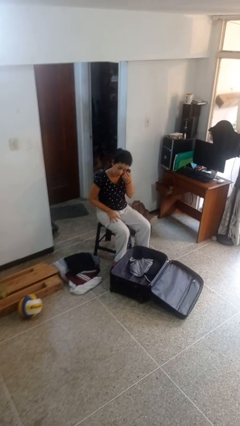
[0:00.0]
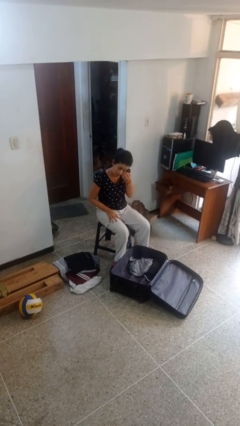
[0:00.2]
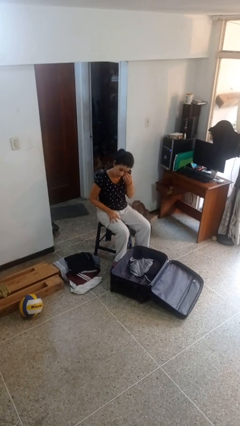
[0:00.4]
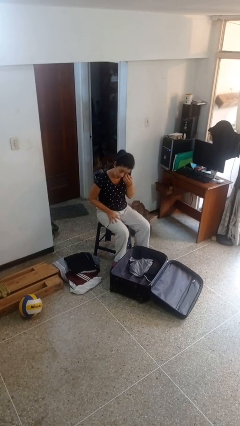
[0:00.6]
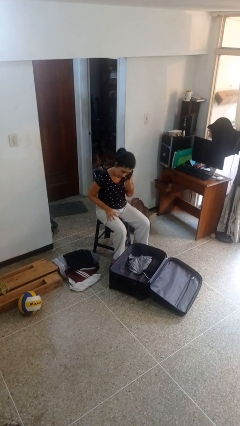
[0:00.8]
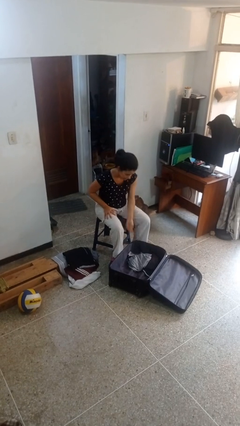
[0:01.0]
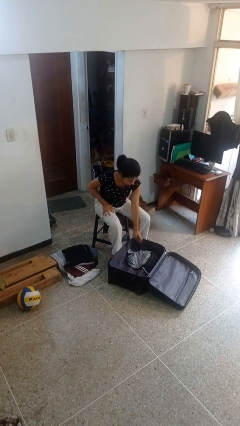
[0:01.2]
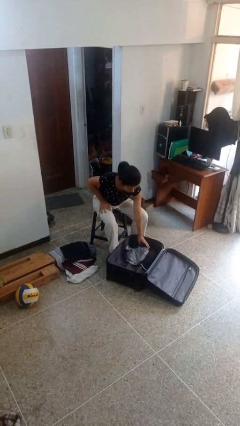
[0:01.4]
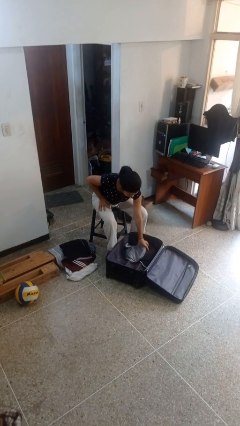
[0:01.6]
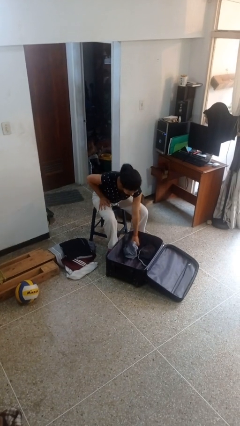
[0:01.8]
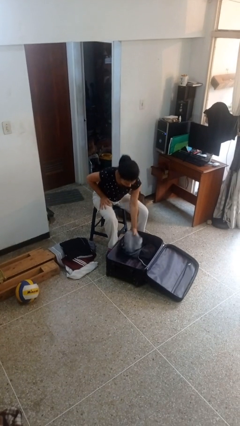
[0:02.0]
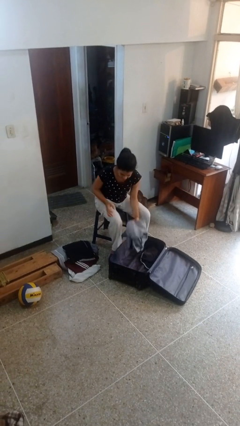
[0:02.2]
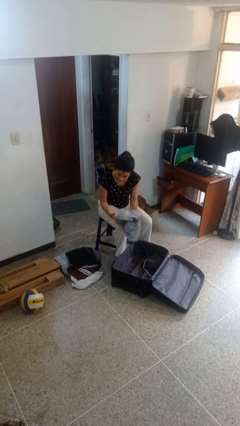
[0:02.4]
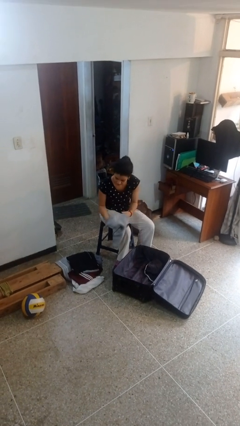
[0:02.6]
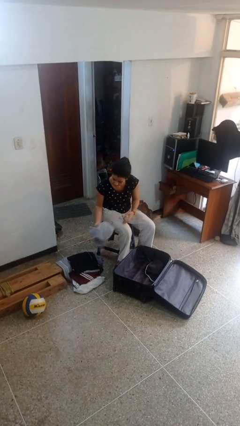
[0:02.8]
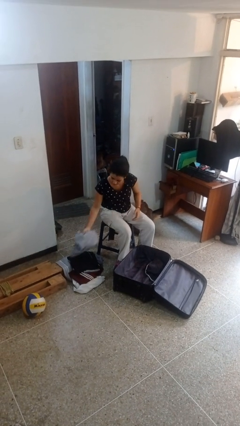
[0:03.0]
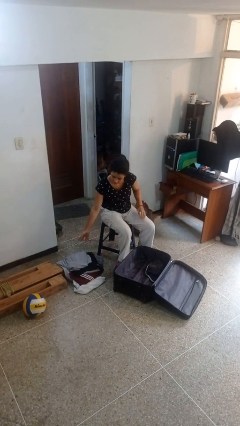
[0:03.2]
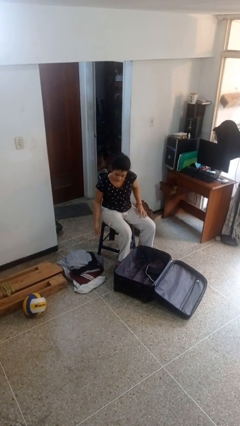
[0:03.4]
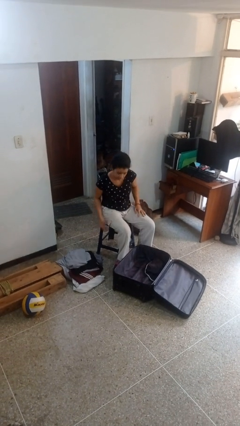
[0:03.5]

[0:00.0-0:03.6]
person unloads clothes from suitcase

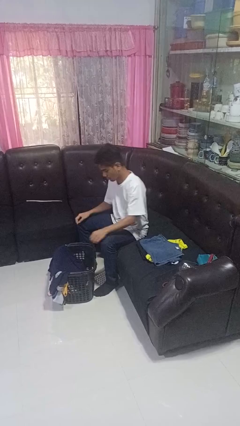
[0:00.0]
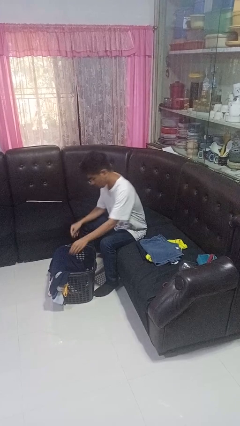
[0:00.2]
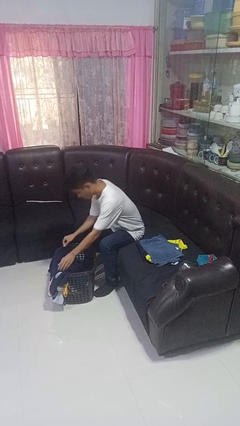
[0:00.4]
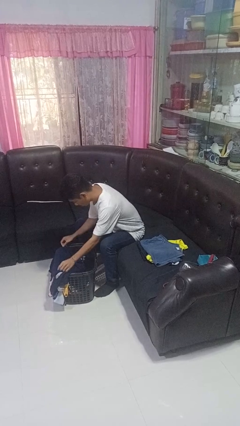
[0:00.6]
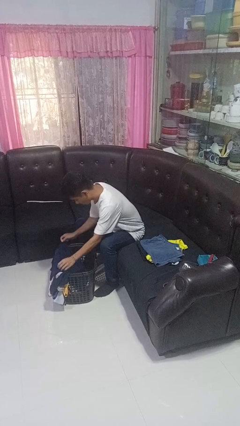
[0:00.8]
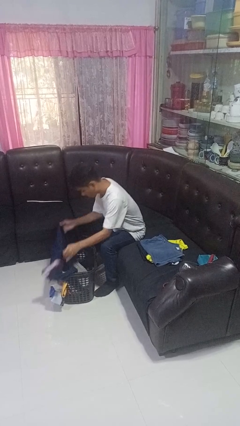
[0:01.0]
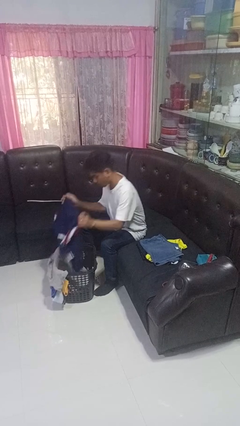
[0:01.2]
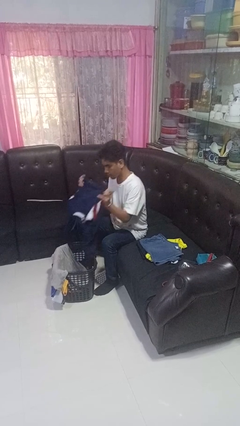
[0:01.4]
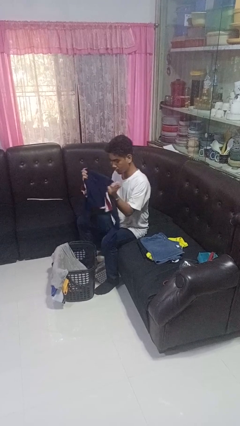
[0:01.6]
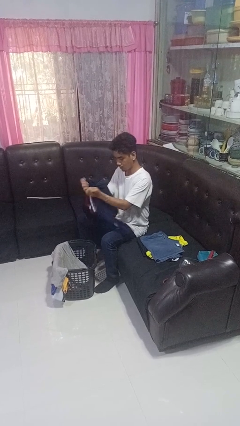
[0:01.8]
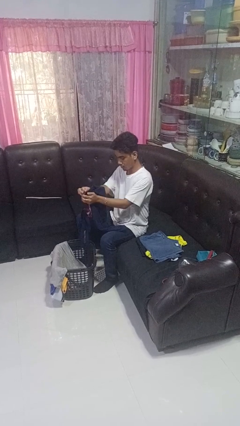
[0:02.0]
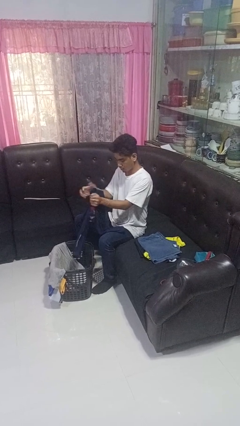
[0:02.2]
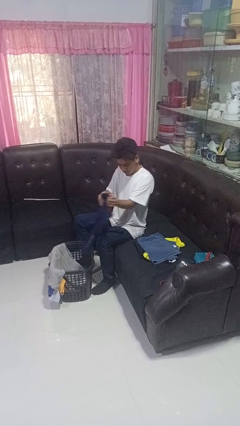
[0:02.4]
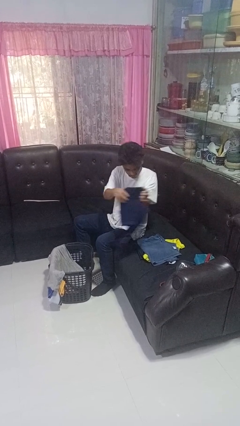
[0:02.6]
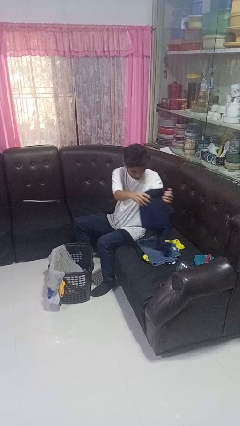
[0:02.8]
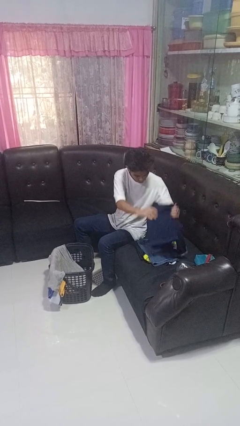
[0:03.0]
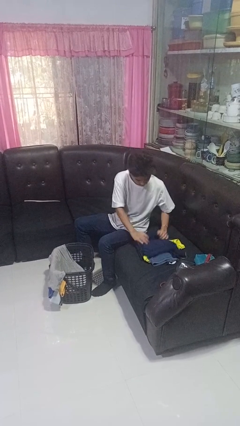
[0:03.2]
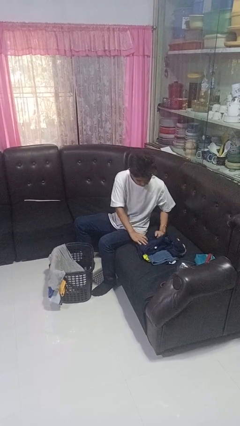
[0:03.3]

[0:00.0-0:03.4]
person folds shirt

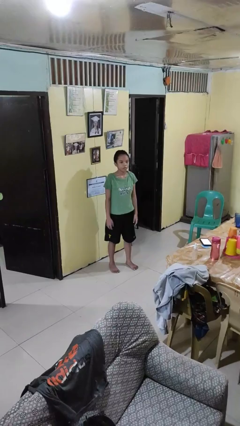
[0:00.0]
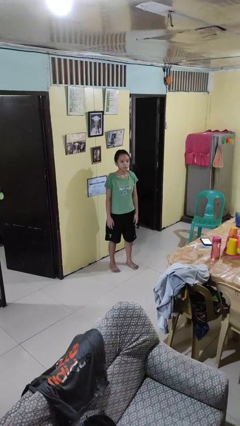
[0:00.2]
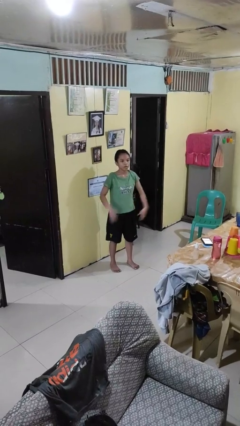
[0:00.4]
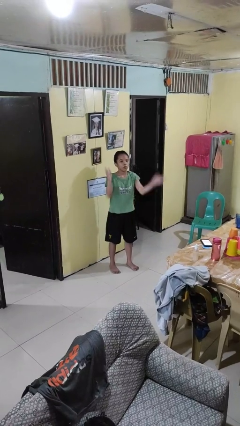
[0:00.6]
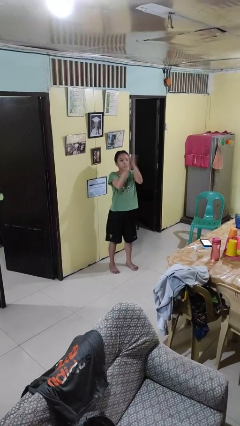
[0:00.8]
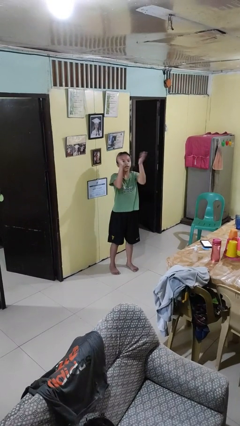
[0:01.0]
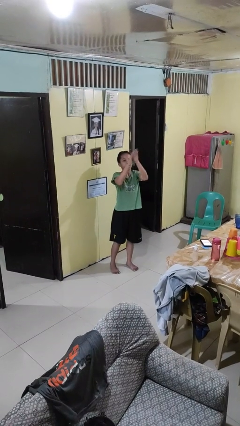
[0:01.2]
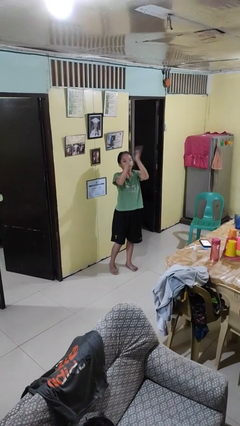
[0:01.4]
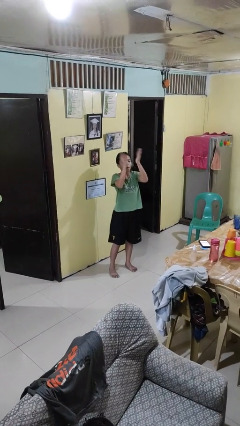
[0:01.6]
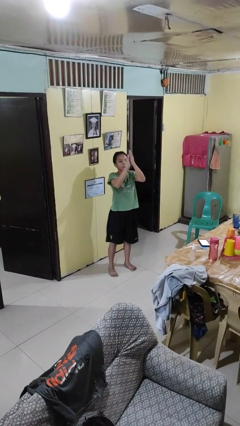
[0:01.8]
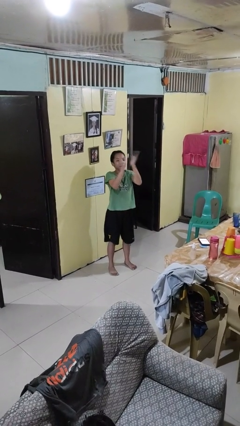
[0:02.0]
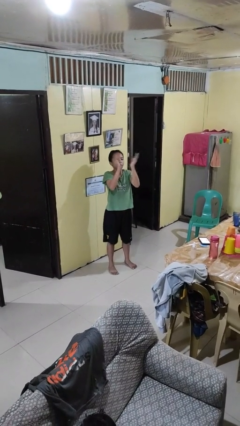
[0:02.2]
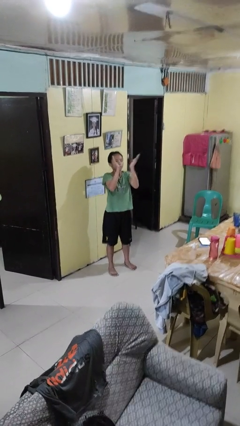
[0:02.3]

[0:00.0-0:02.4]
person claps hands

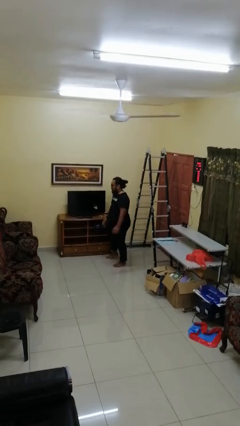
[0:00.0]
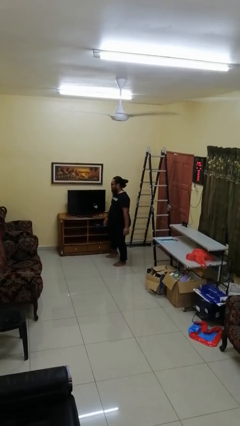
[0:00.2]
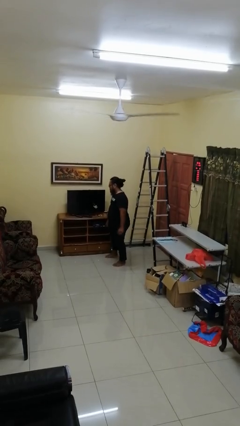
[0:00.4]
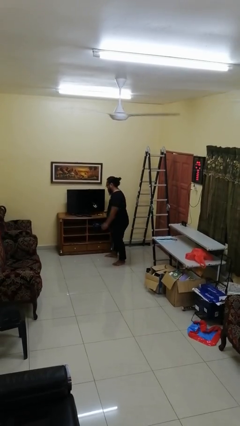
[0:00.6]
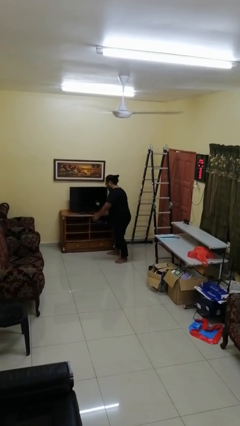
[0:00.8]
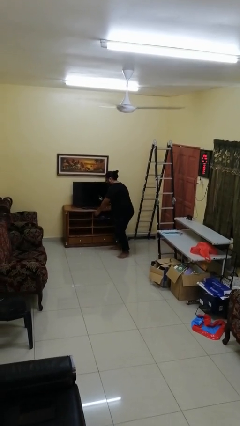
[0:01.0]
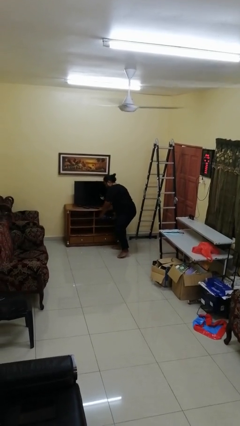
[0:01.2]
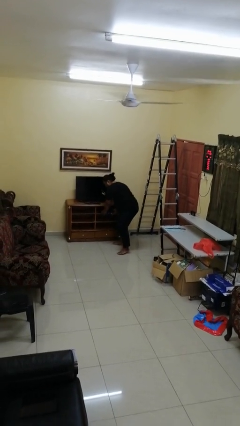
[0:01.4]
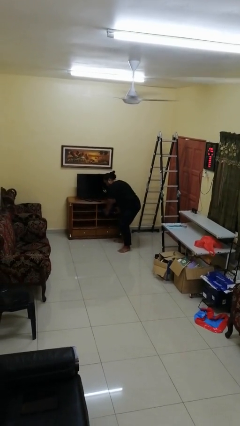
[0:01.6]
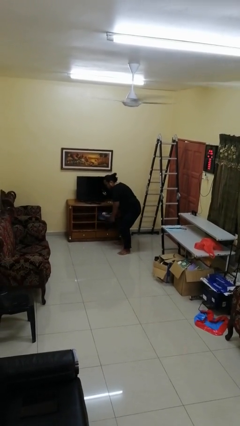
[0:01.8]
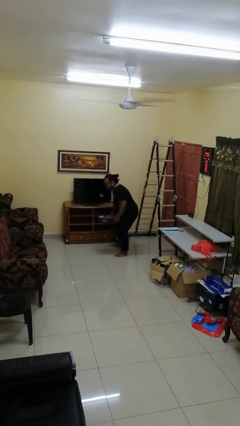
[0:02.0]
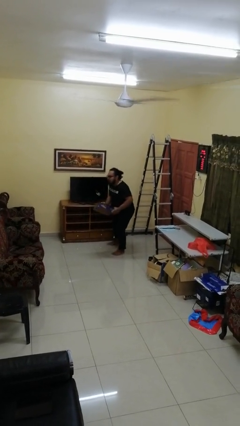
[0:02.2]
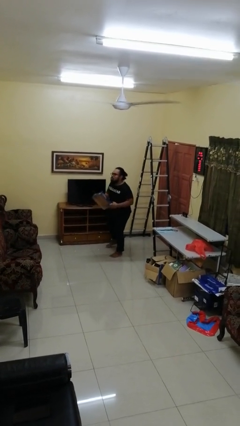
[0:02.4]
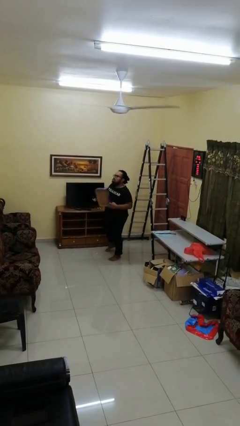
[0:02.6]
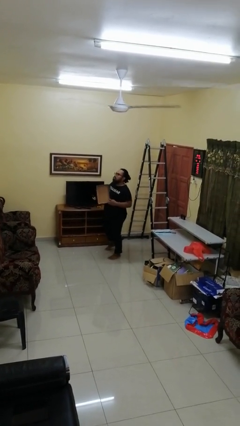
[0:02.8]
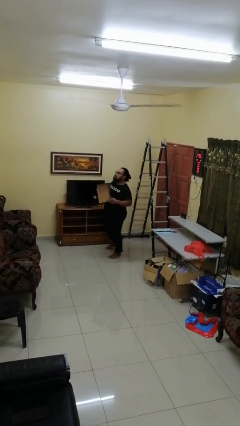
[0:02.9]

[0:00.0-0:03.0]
person picks up object from cabinet

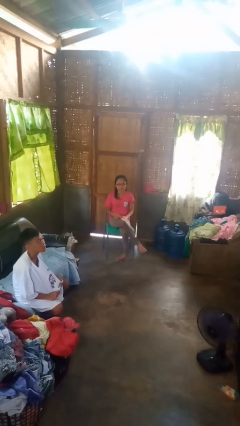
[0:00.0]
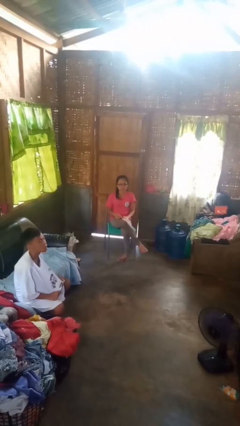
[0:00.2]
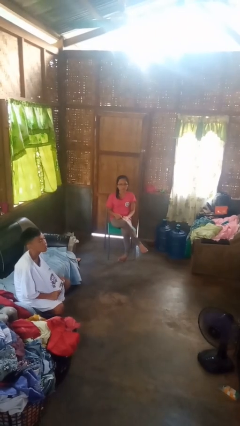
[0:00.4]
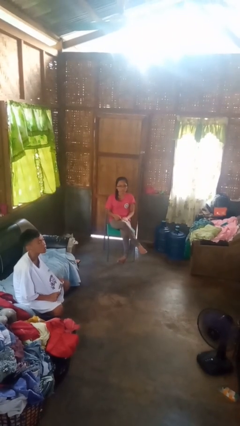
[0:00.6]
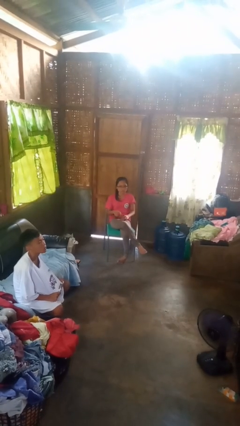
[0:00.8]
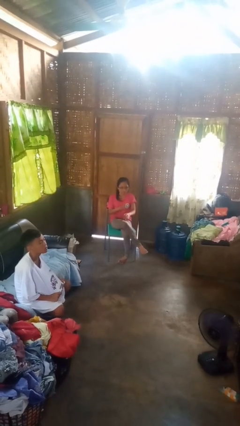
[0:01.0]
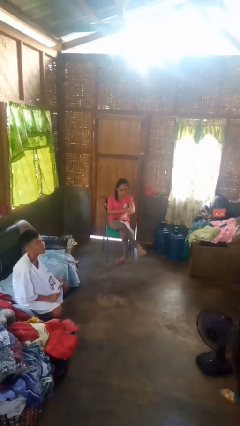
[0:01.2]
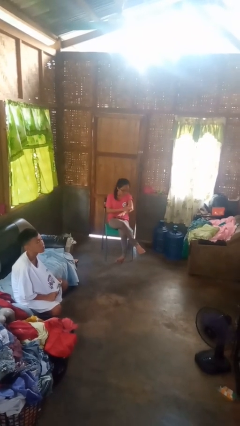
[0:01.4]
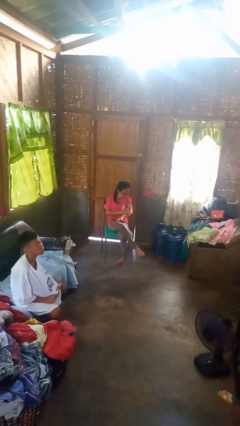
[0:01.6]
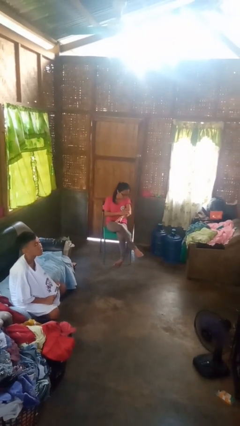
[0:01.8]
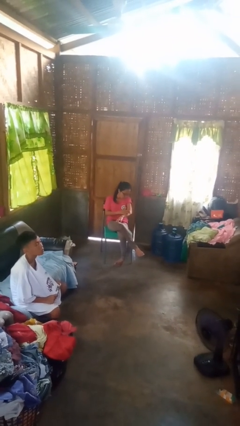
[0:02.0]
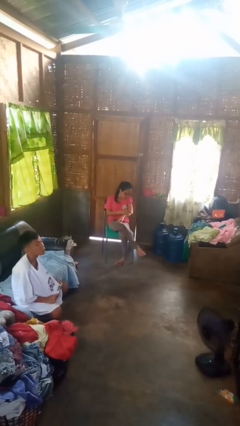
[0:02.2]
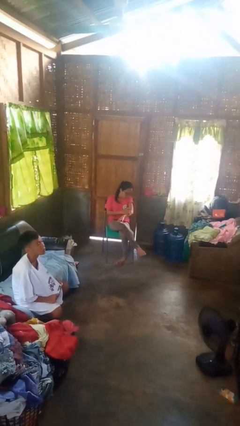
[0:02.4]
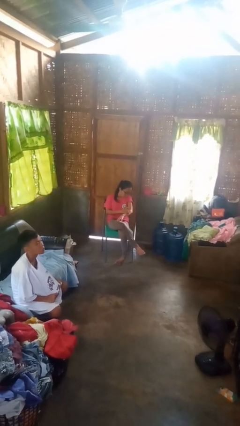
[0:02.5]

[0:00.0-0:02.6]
person swats bug

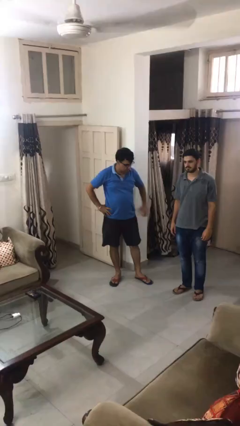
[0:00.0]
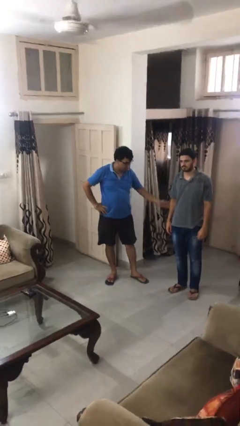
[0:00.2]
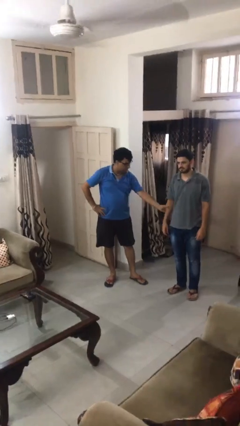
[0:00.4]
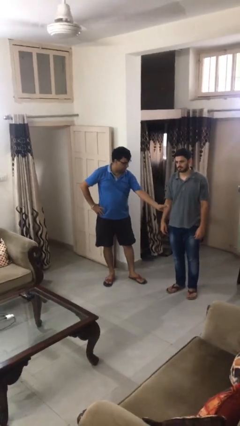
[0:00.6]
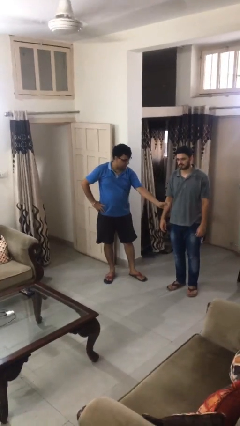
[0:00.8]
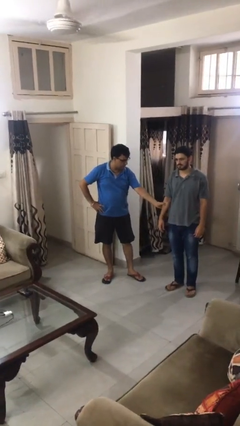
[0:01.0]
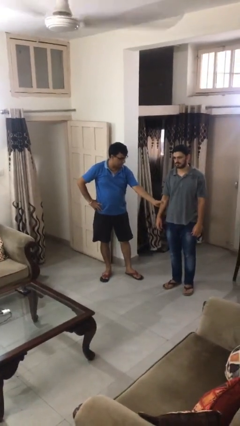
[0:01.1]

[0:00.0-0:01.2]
person grabs person by forearm

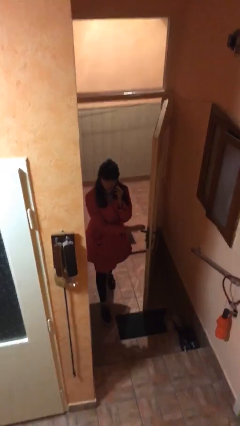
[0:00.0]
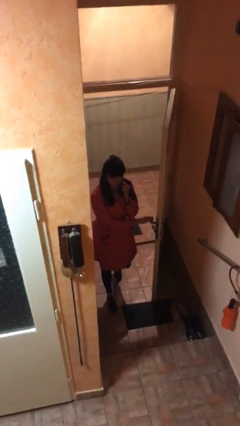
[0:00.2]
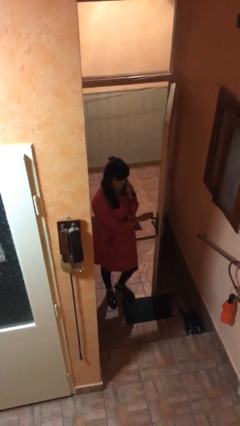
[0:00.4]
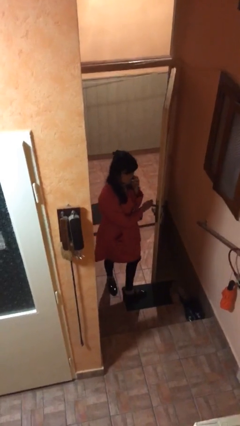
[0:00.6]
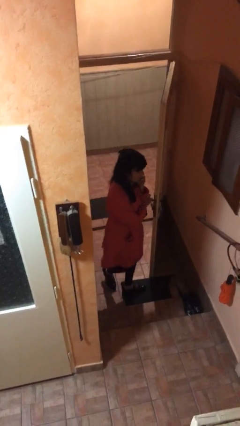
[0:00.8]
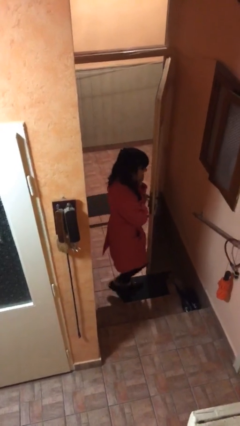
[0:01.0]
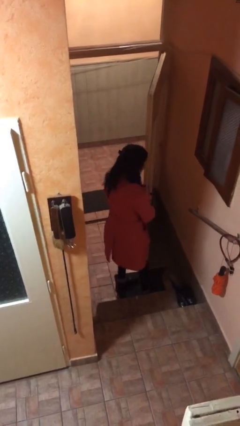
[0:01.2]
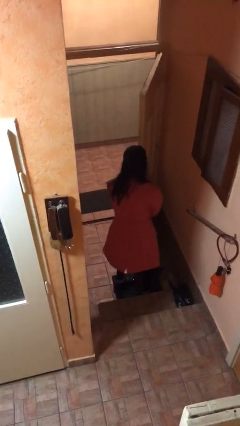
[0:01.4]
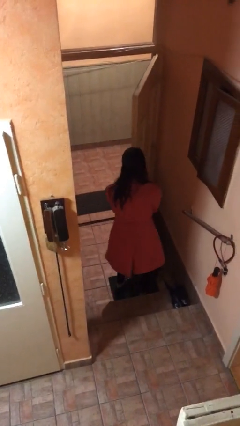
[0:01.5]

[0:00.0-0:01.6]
person enters scene through structure
